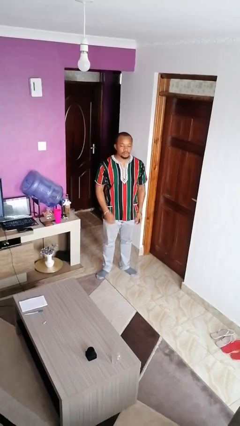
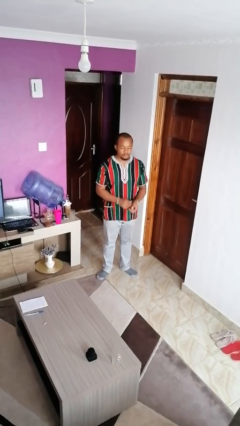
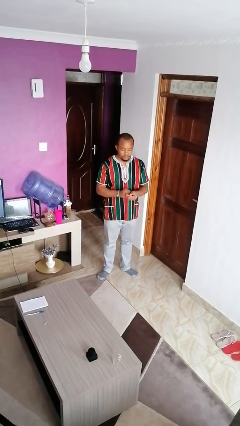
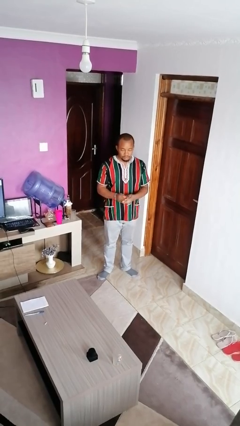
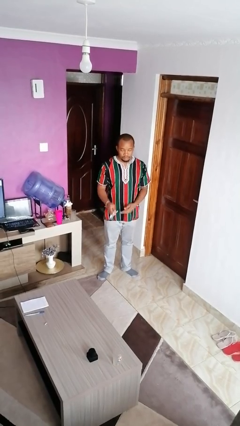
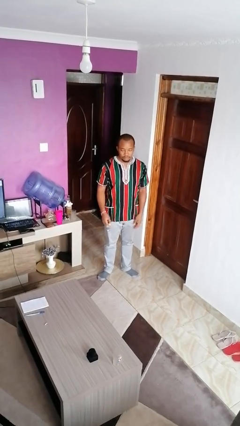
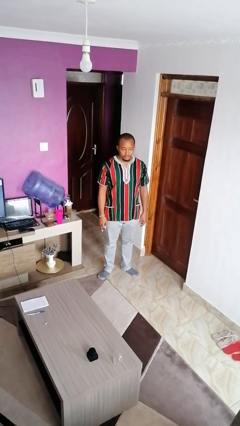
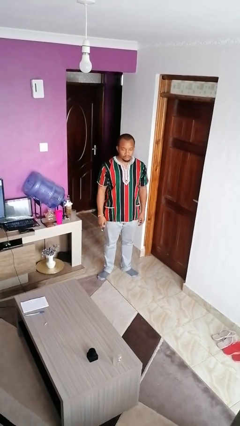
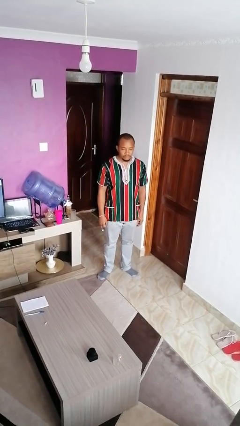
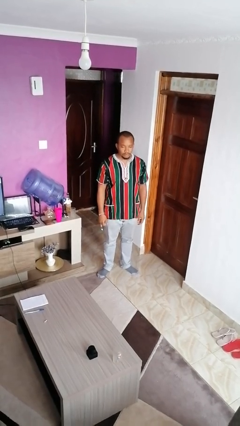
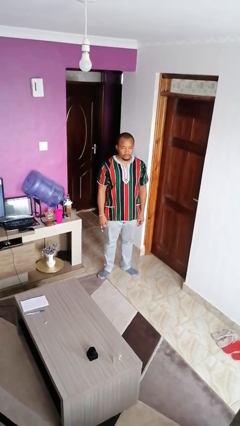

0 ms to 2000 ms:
person takes off wristwatch

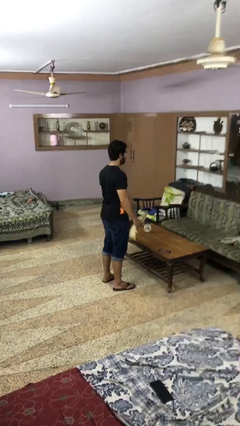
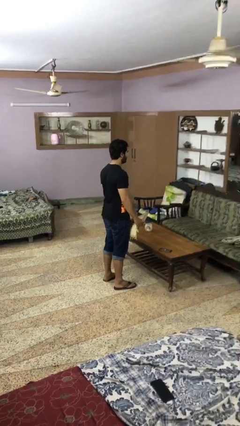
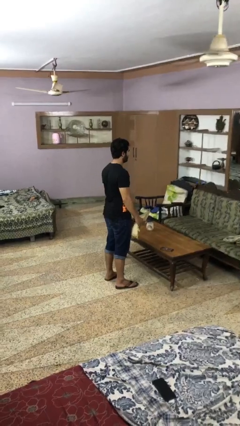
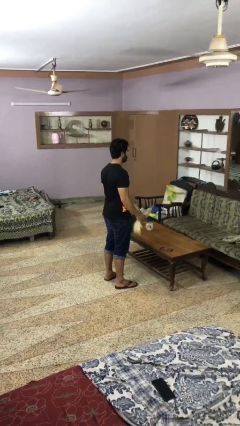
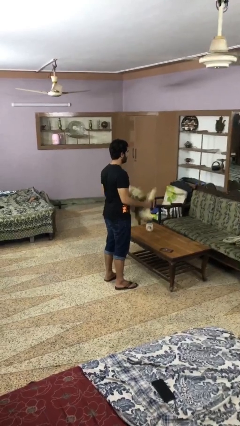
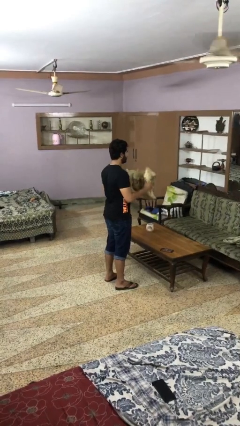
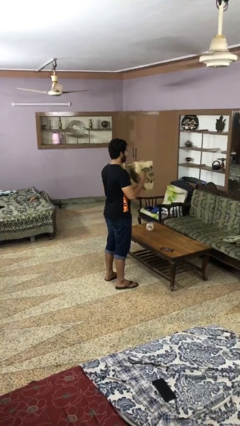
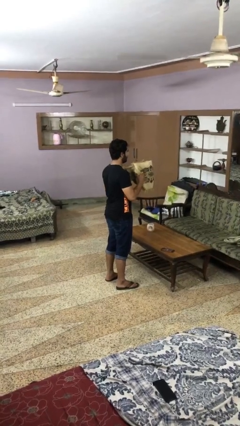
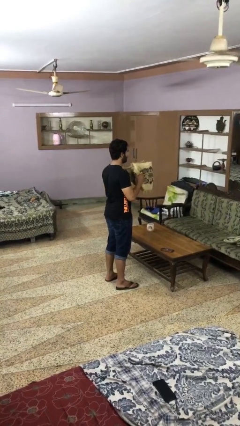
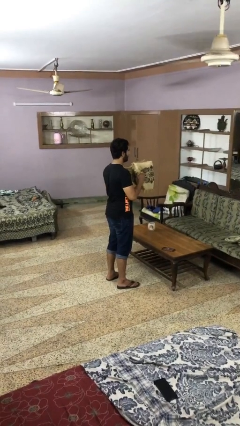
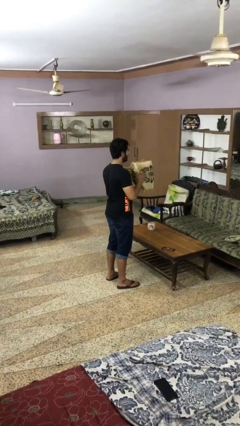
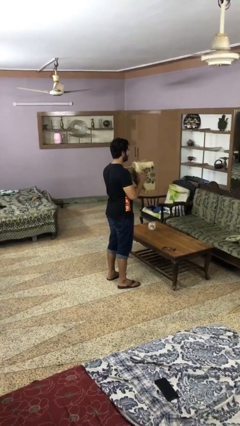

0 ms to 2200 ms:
person squeezes object

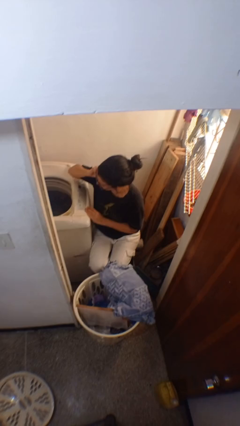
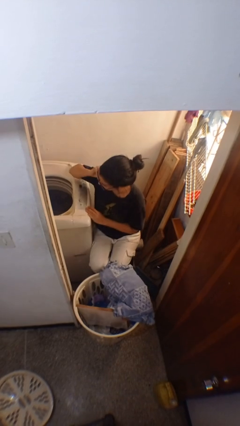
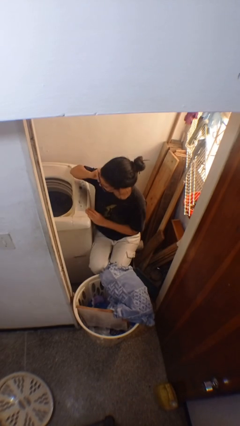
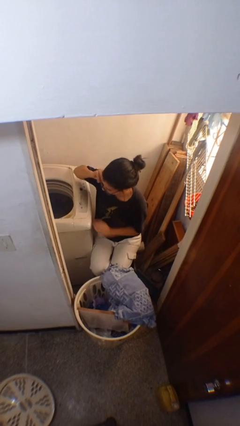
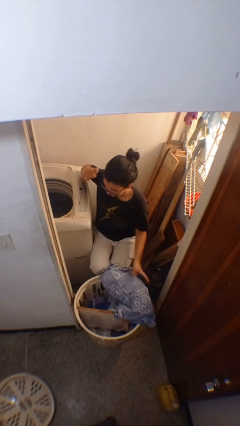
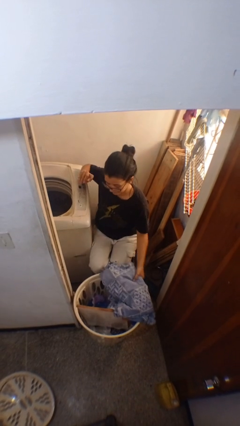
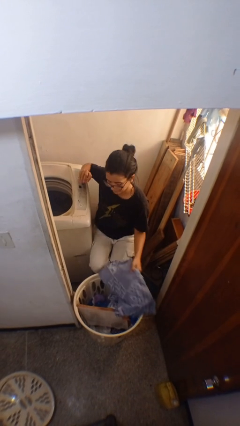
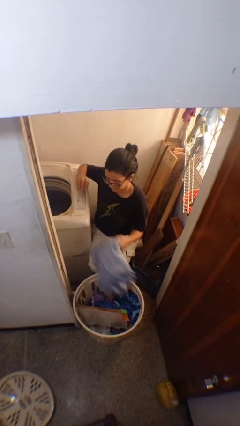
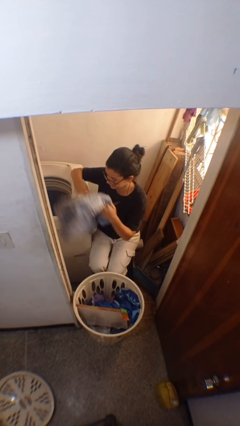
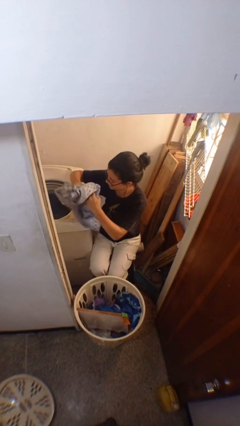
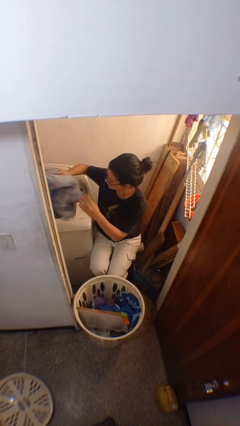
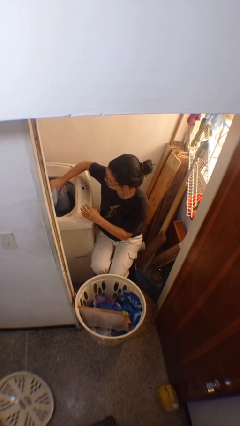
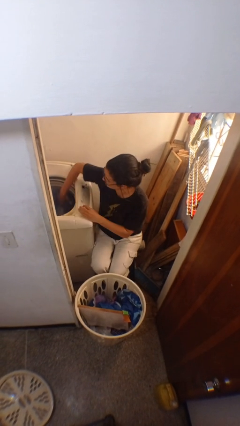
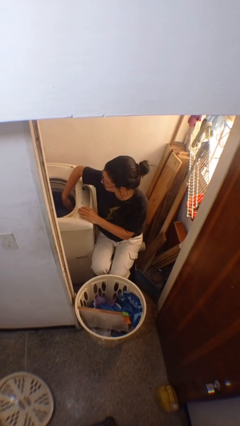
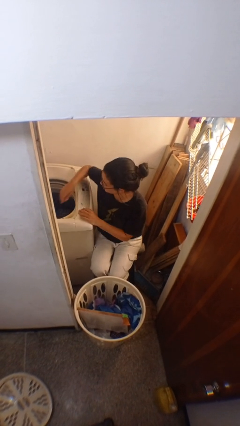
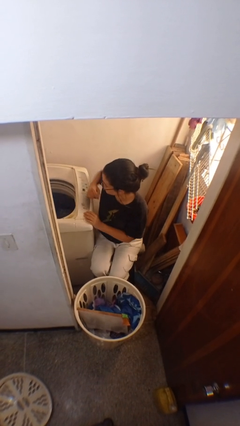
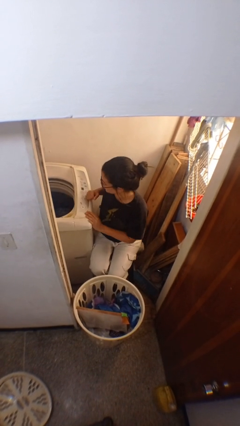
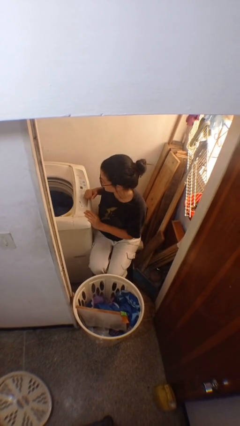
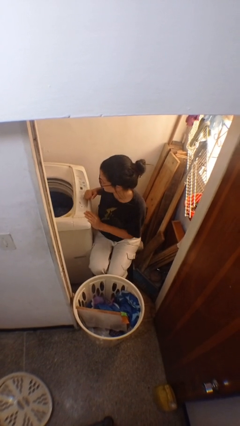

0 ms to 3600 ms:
person loads clotheswasher

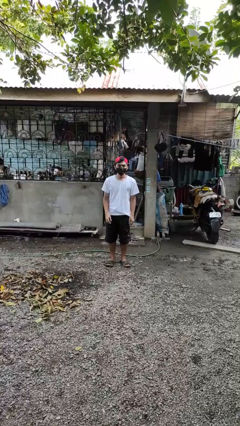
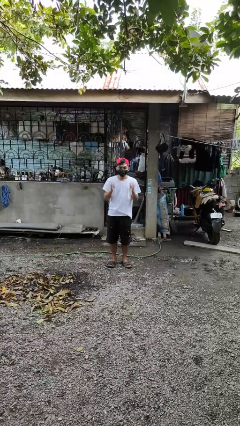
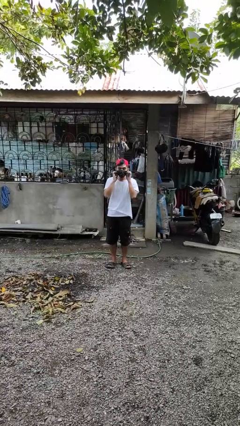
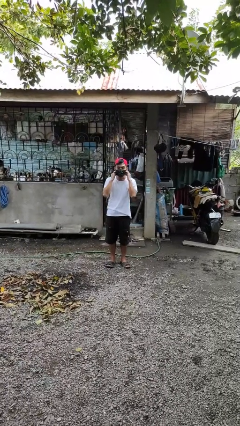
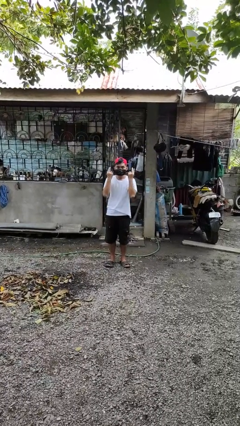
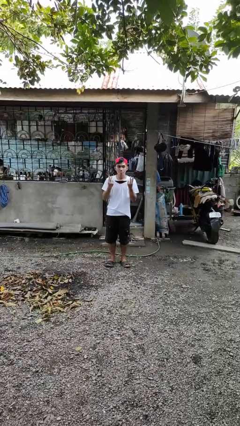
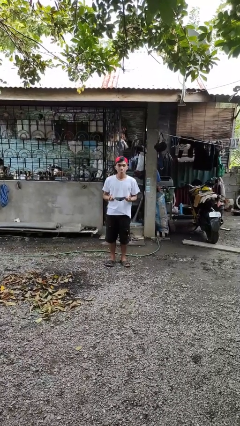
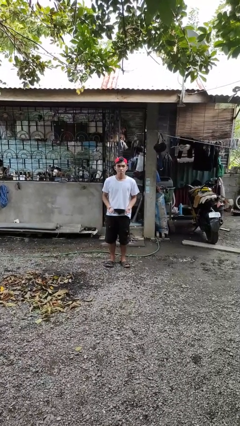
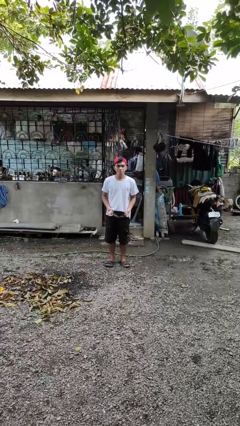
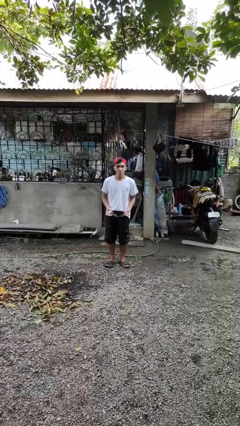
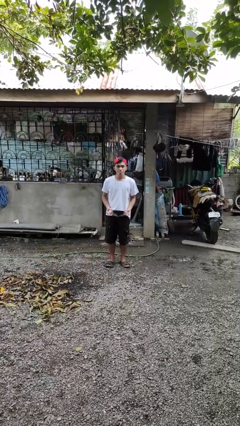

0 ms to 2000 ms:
person takes off facemask

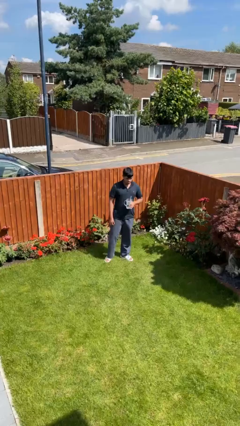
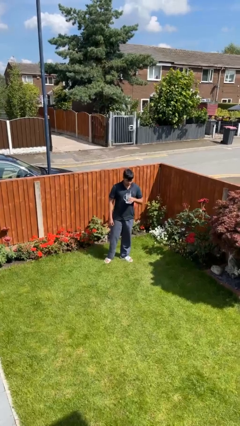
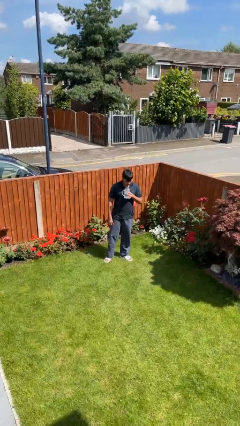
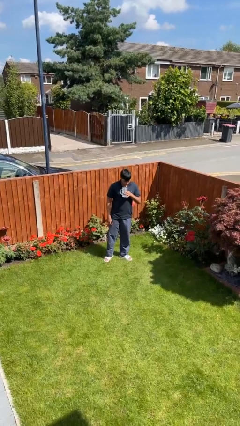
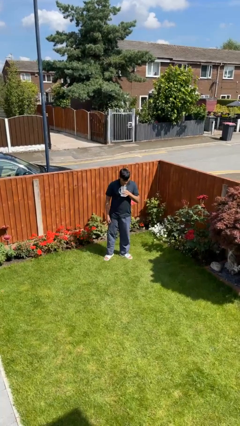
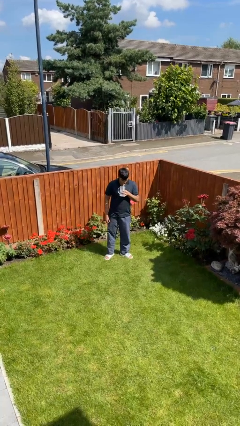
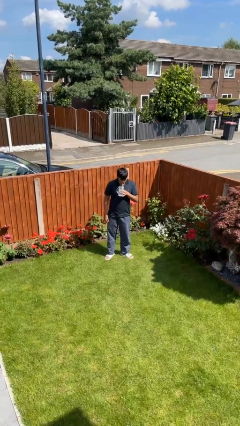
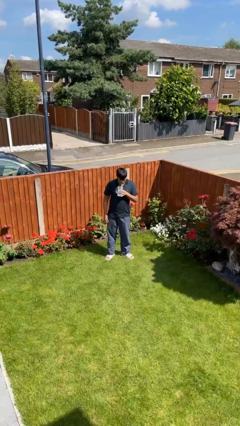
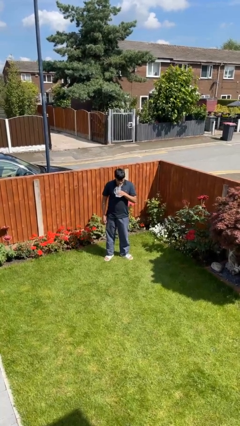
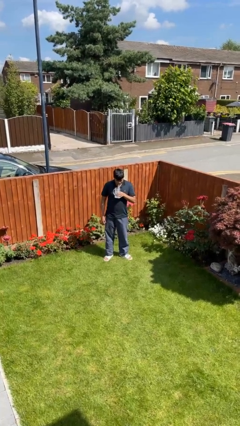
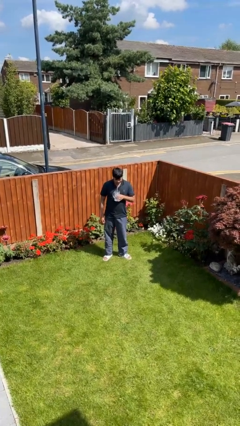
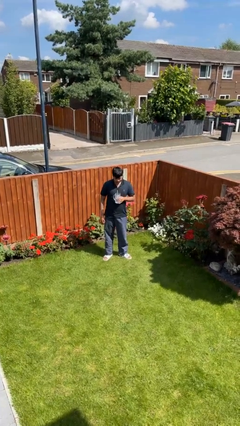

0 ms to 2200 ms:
person drinks from straw

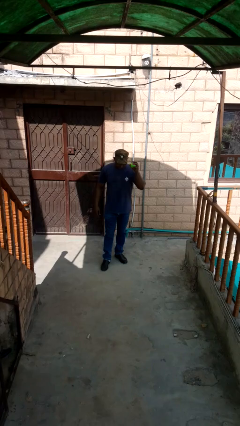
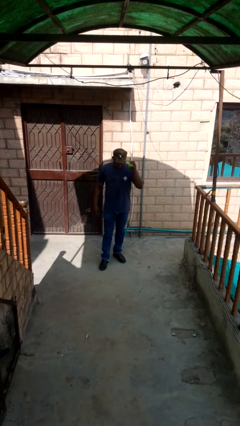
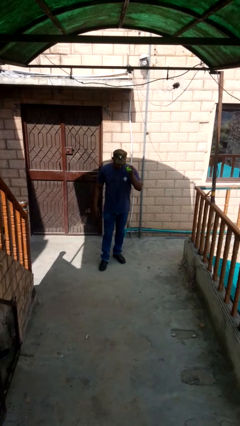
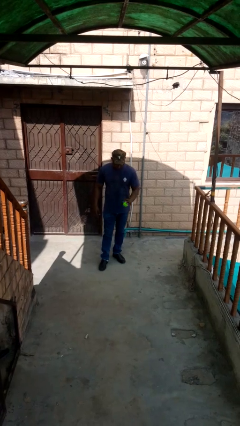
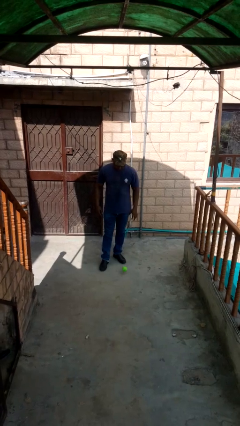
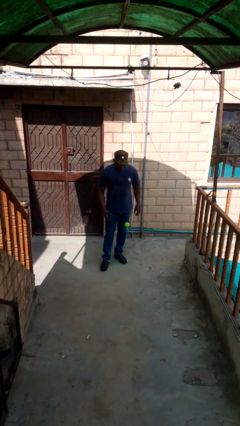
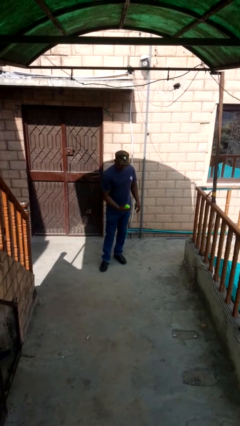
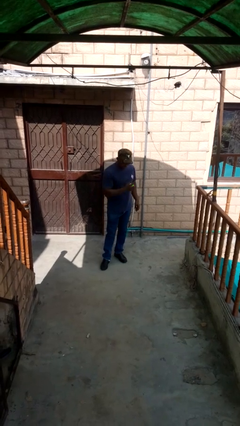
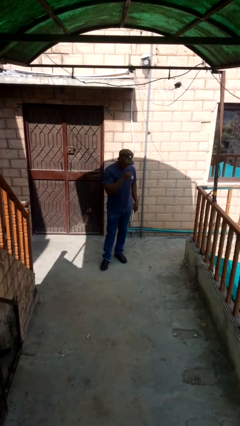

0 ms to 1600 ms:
person bounces ball on floor

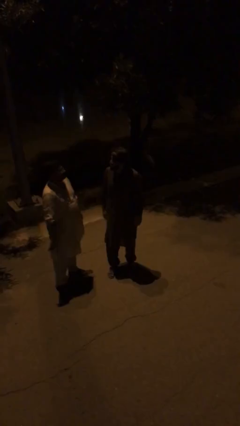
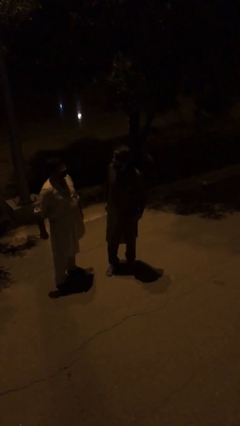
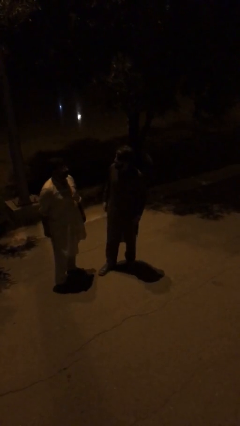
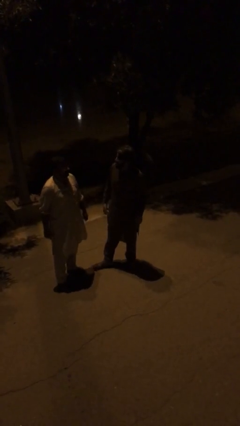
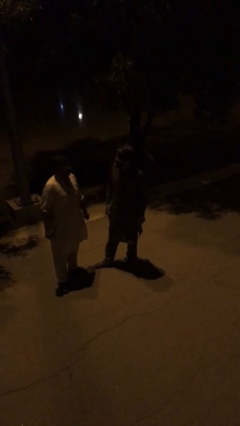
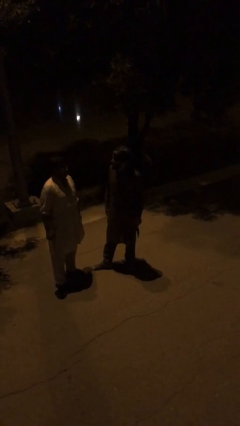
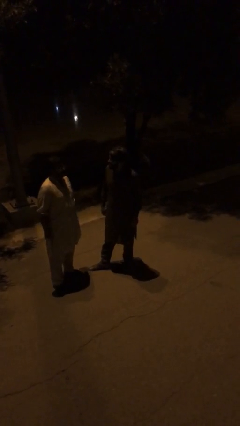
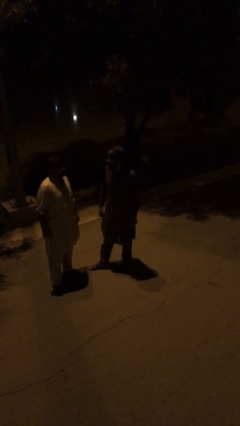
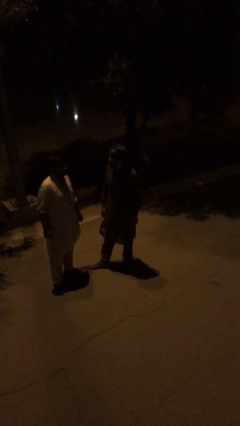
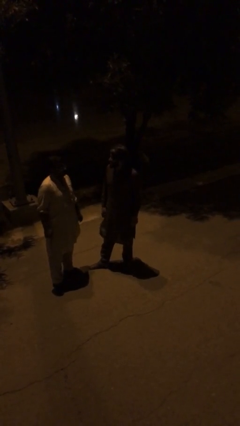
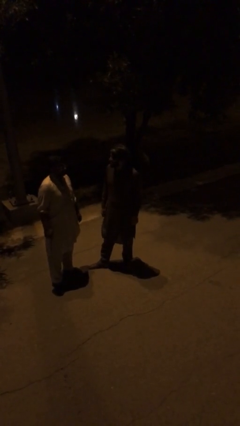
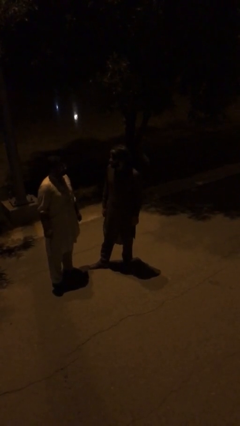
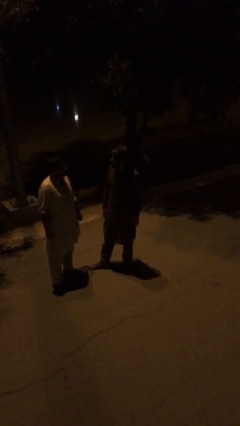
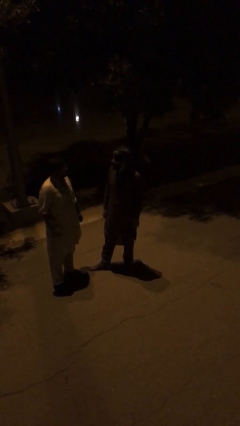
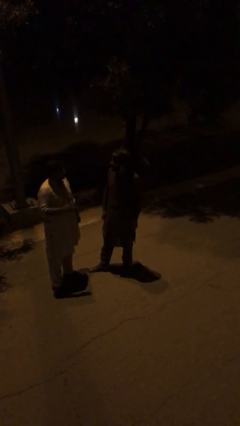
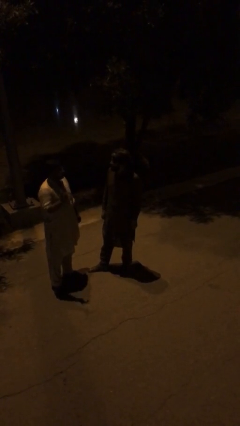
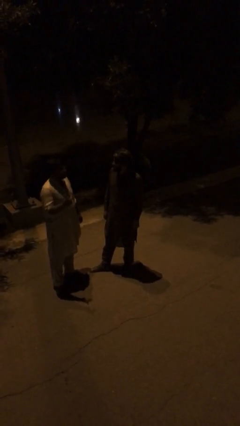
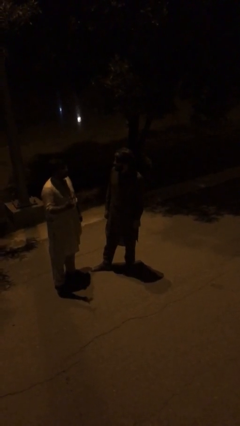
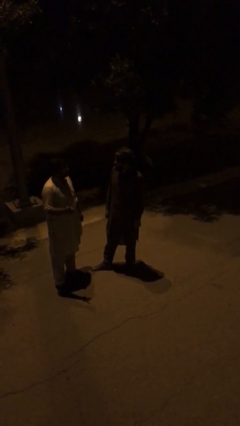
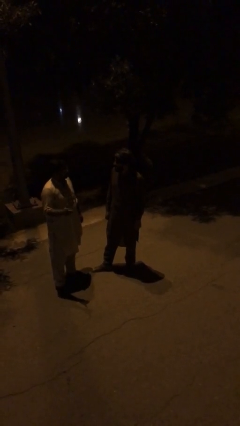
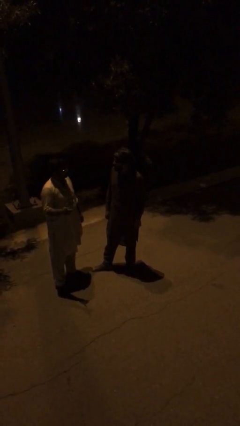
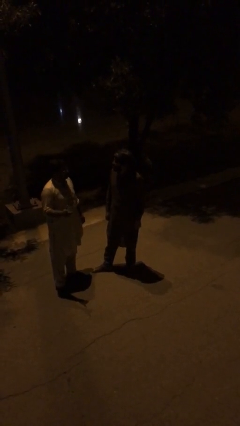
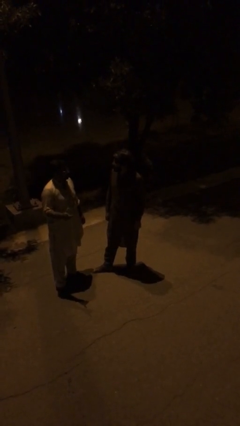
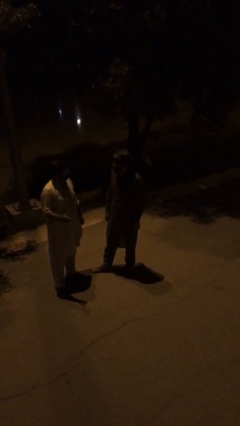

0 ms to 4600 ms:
person talks to person
